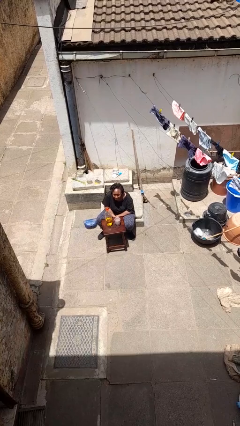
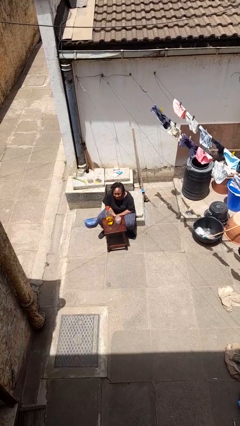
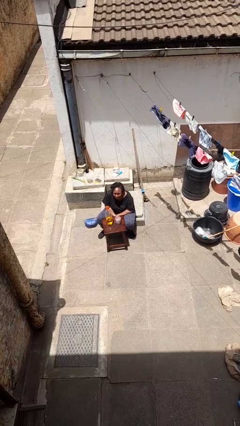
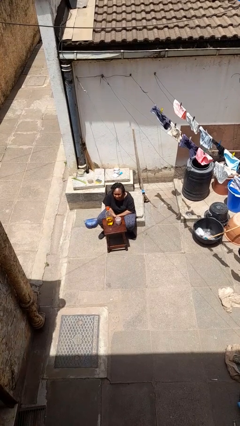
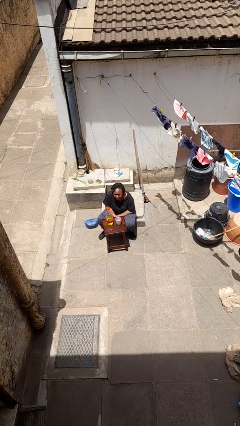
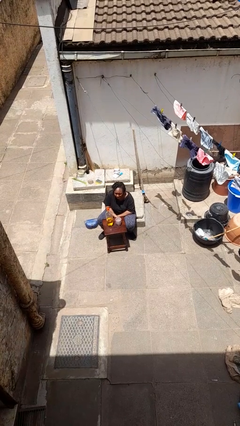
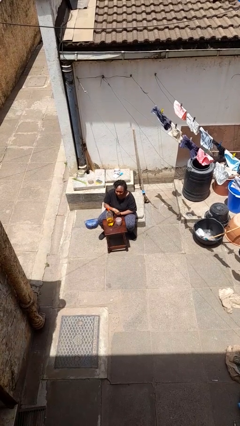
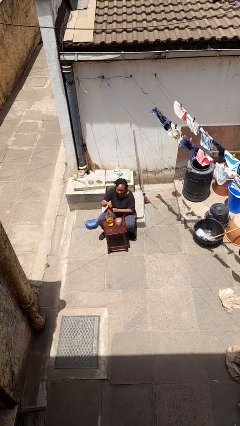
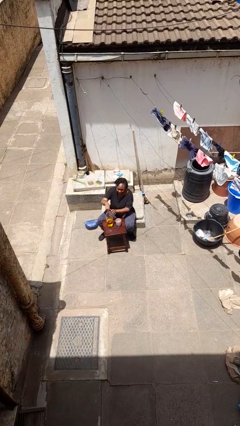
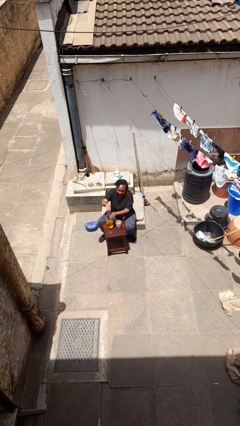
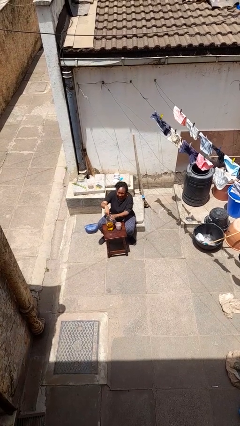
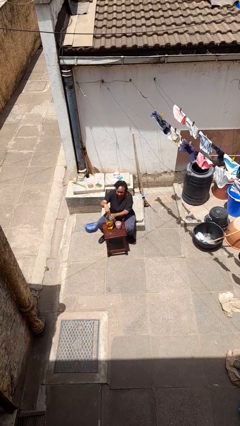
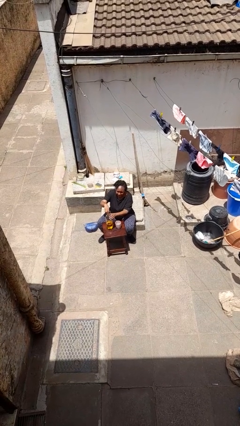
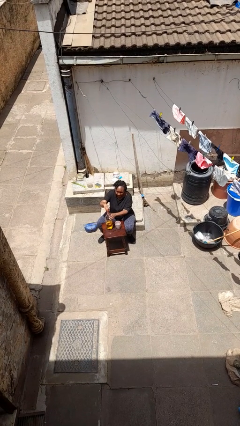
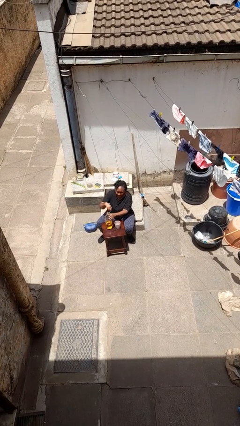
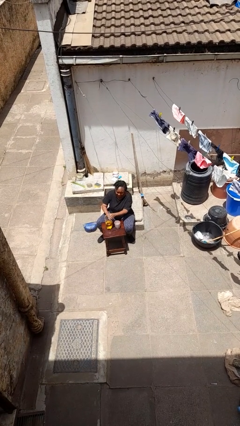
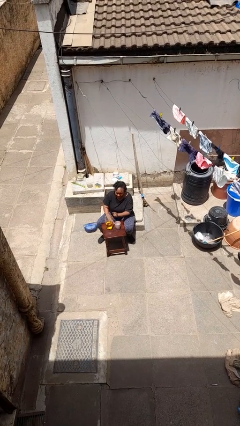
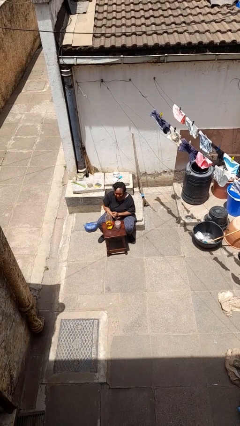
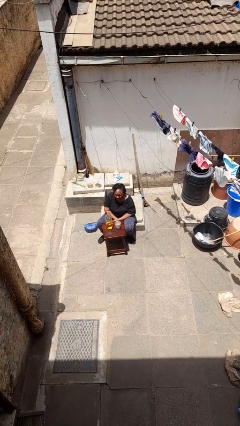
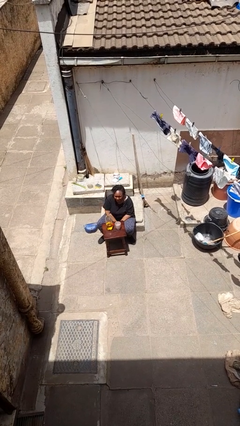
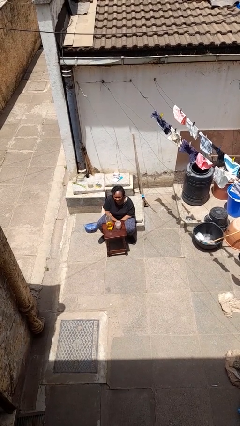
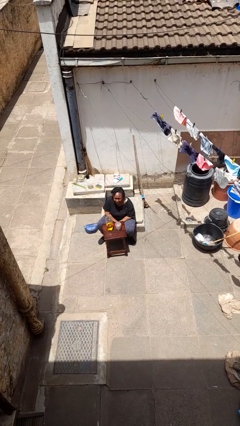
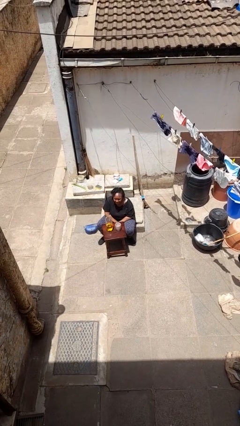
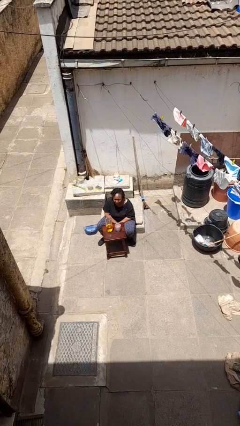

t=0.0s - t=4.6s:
person unscrews lid from bottle

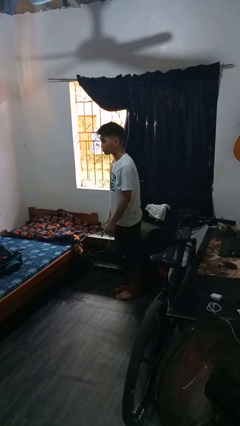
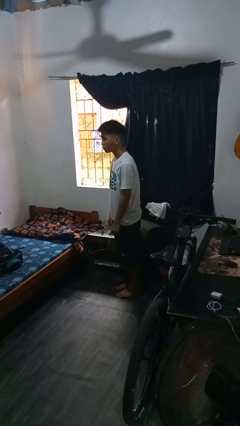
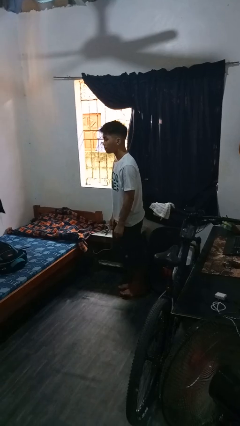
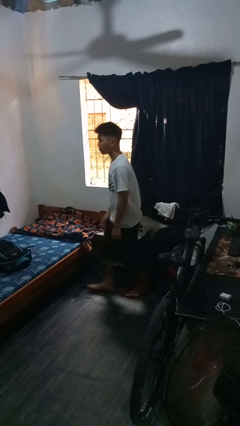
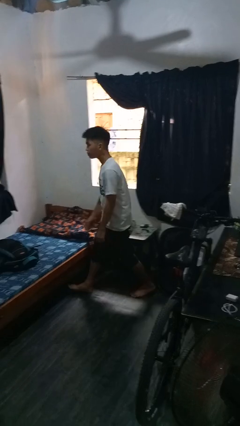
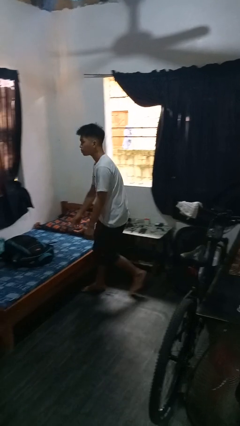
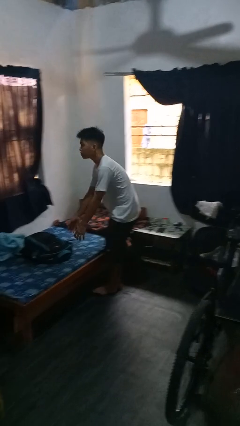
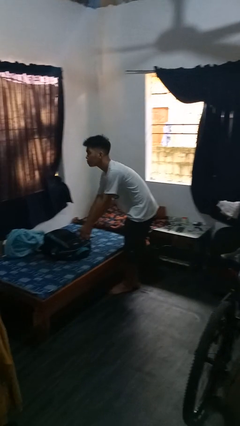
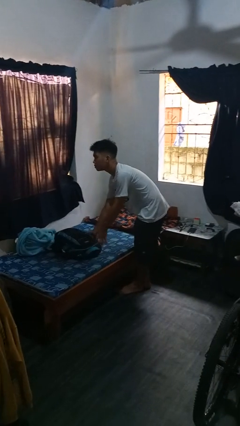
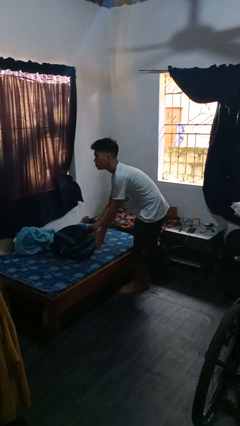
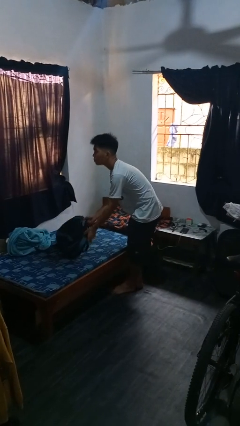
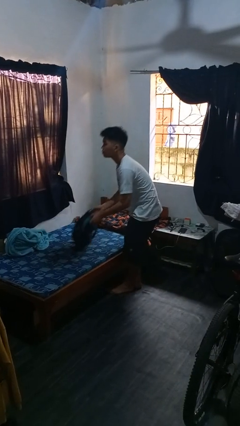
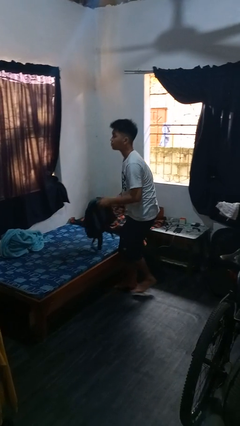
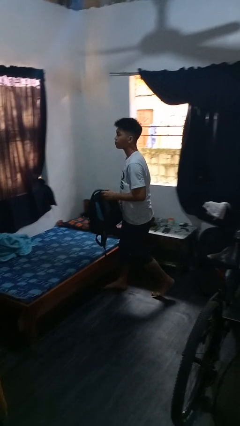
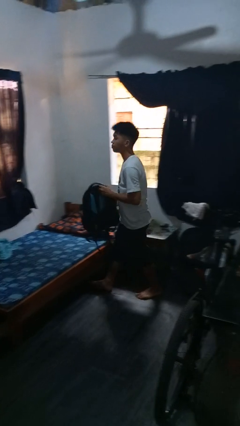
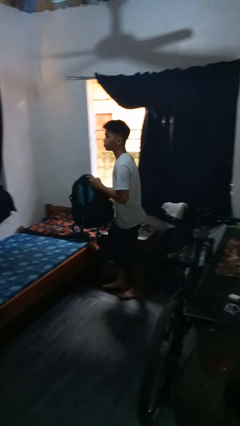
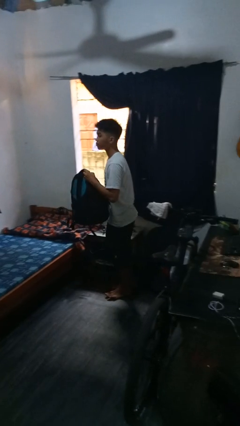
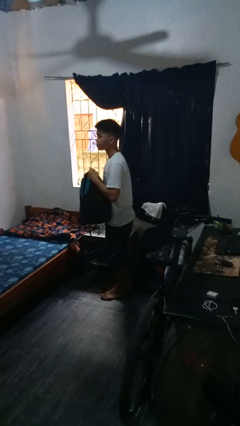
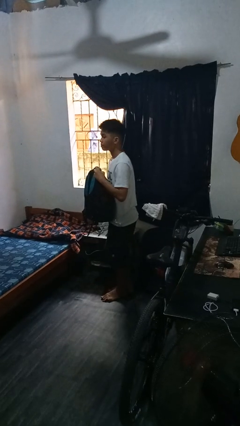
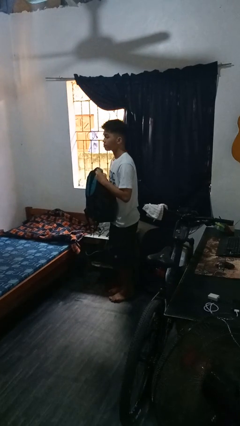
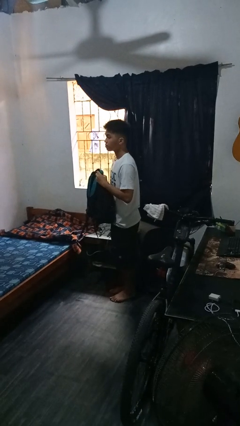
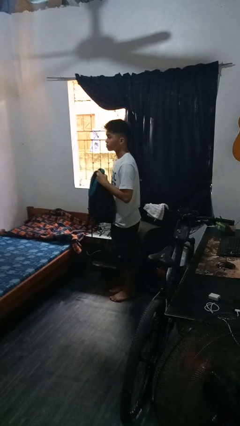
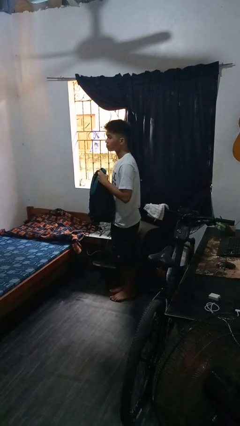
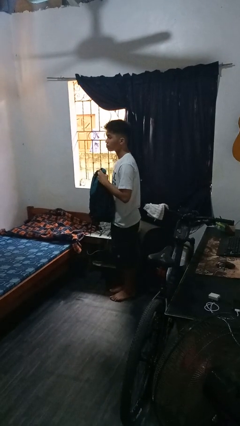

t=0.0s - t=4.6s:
person picks up object from bed

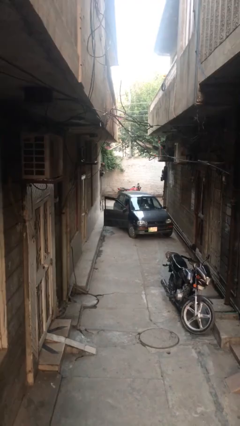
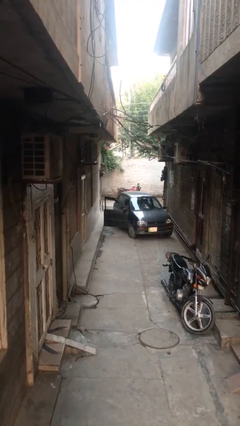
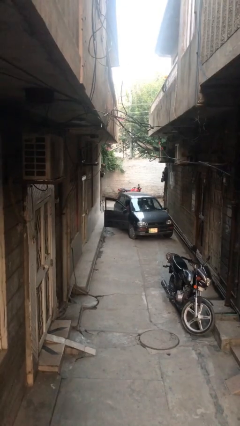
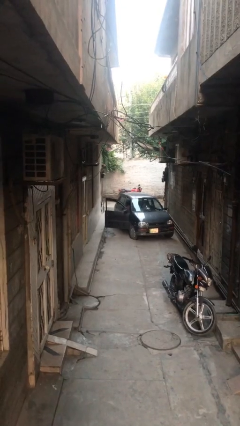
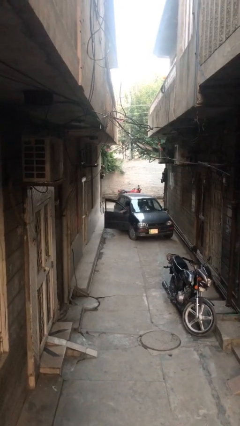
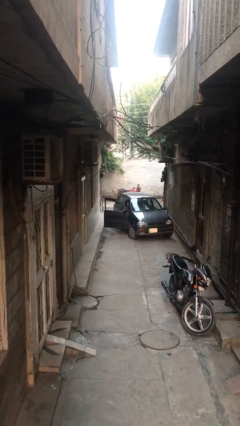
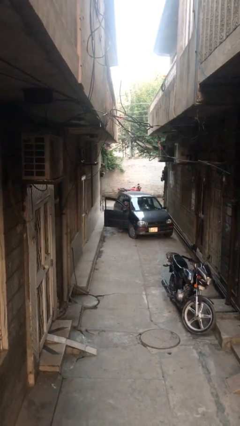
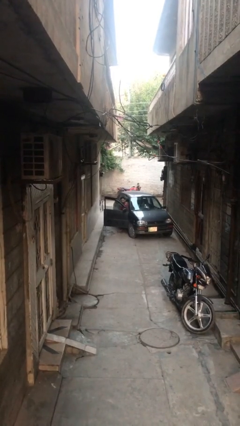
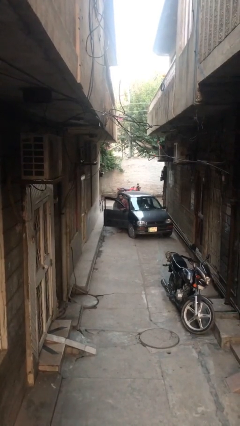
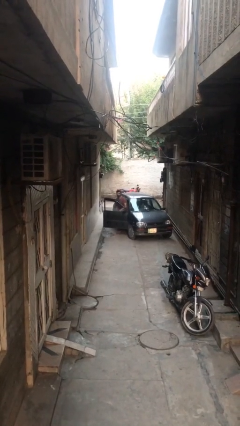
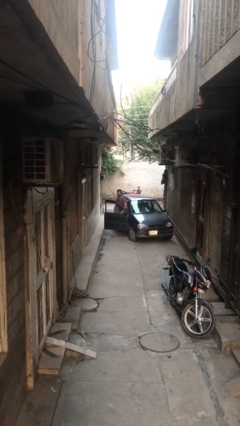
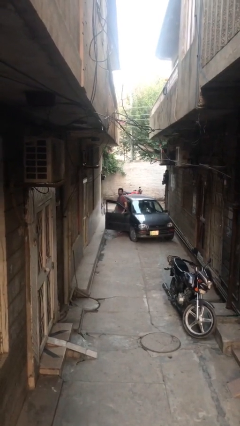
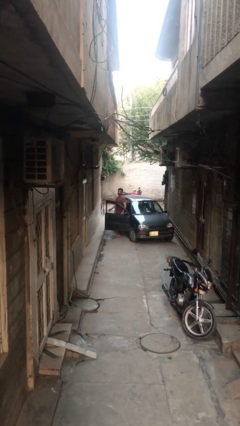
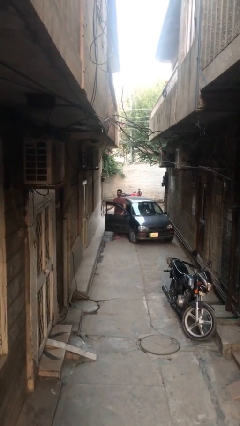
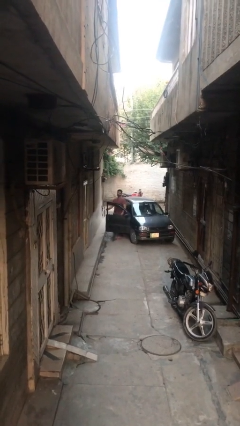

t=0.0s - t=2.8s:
person exits car

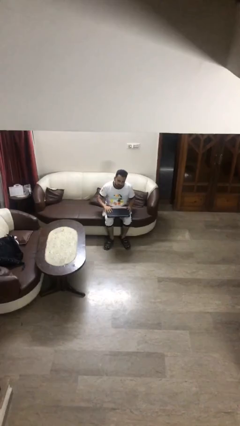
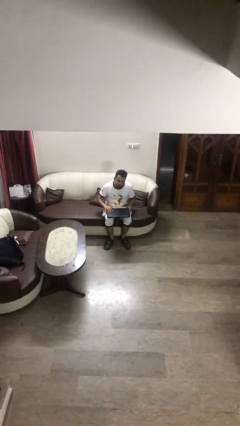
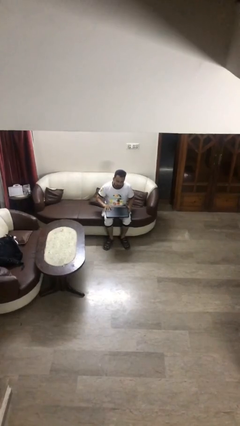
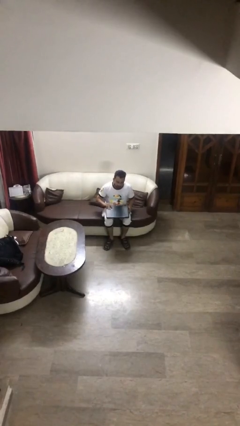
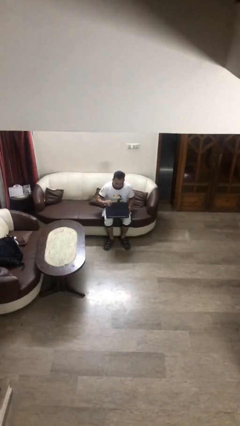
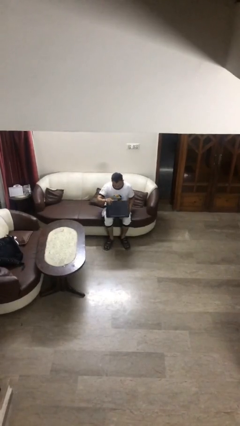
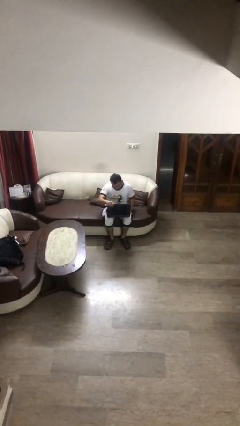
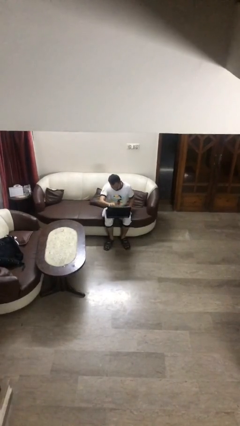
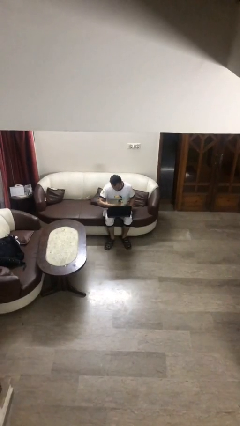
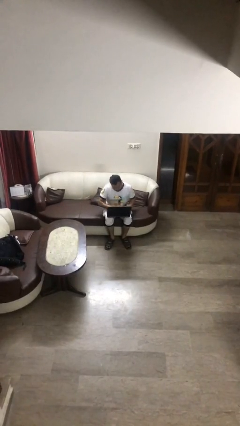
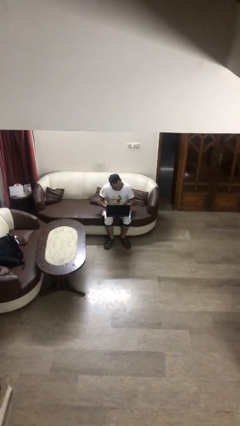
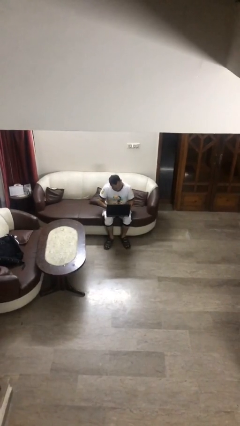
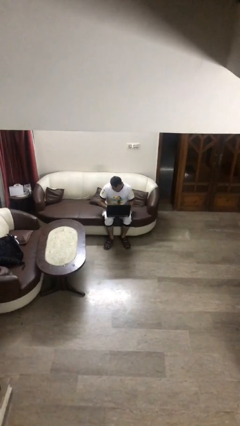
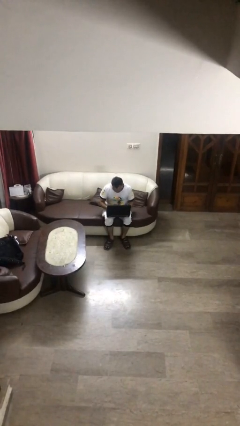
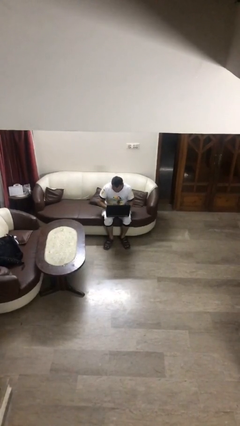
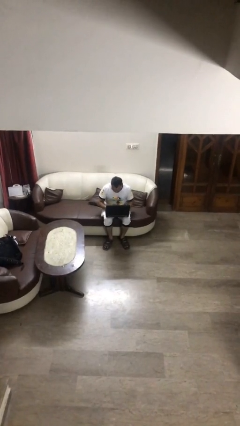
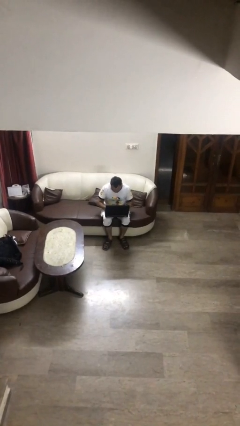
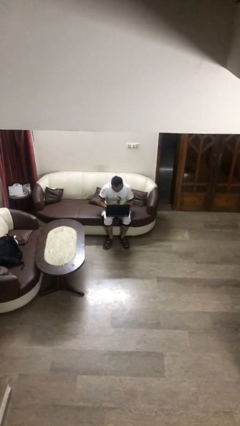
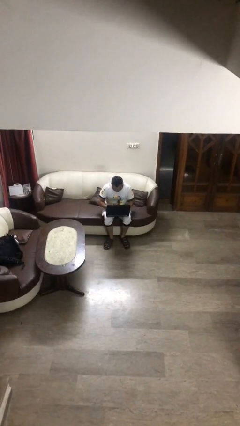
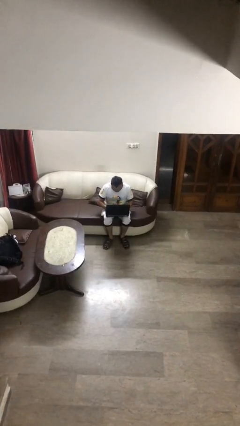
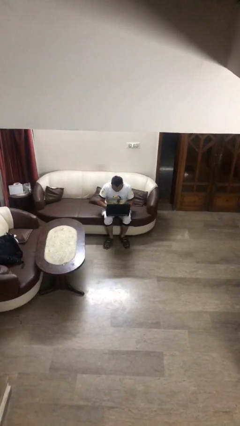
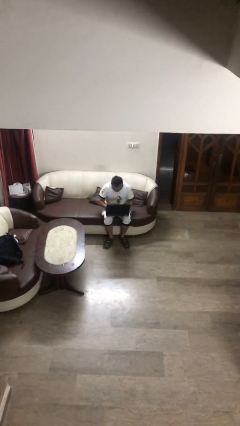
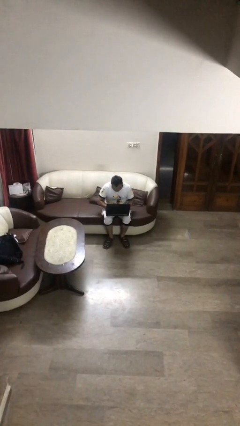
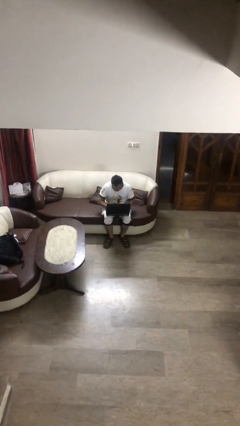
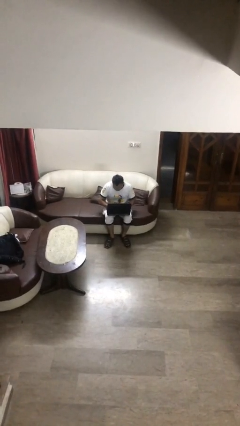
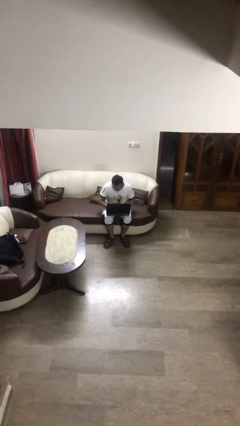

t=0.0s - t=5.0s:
person interacts with laptop

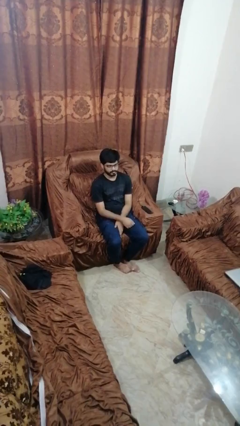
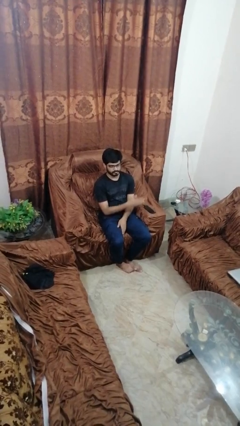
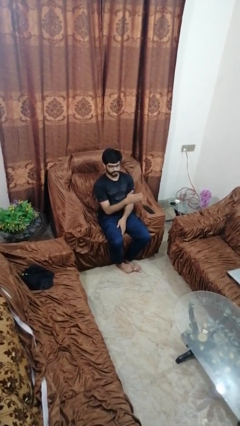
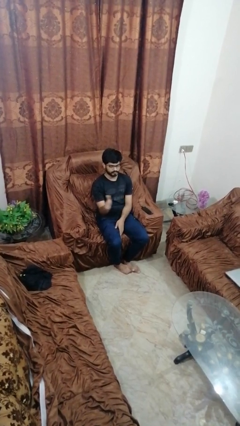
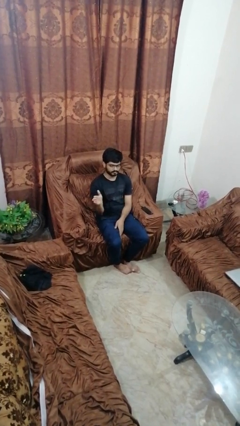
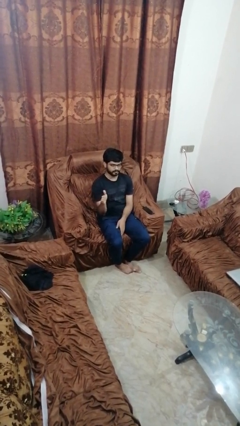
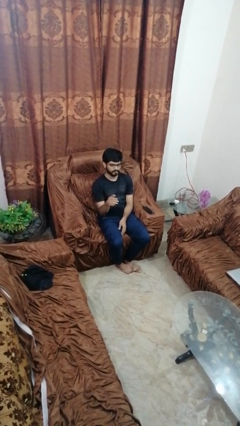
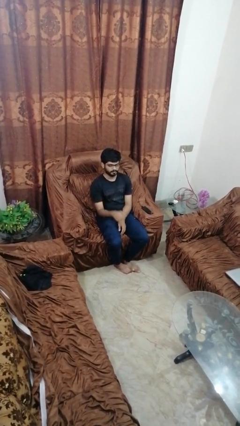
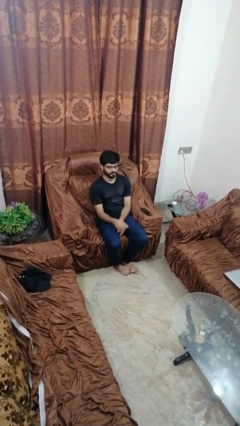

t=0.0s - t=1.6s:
person gestures swipe right
